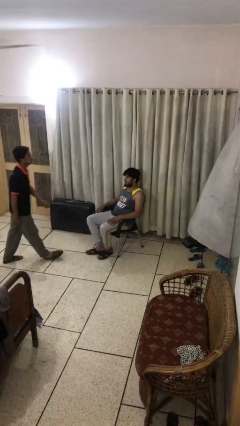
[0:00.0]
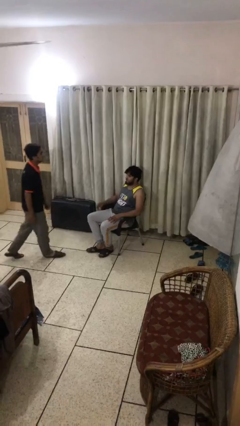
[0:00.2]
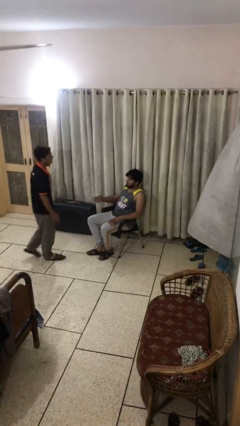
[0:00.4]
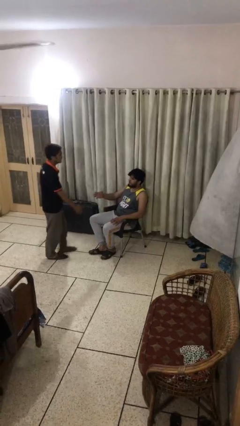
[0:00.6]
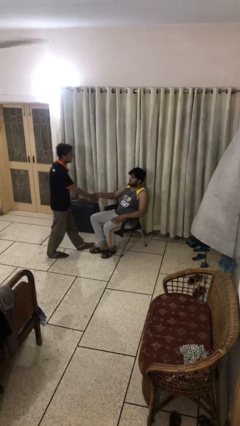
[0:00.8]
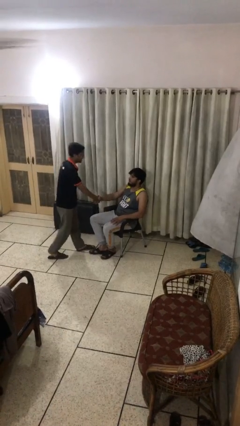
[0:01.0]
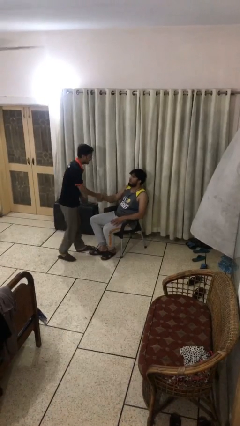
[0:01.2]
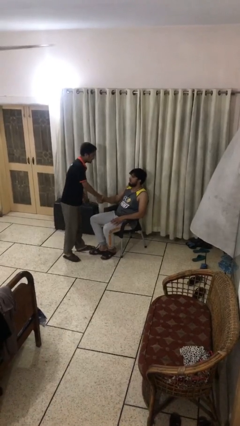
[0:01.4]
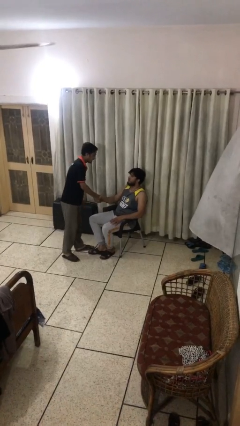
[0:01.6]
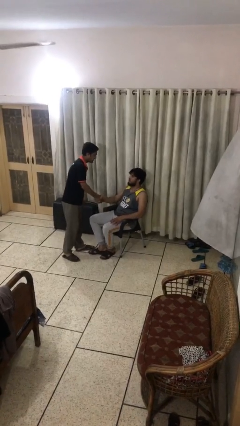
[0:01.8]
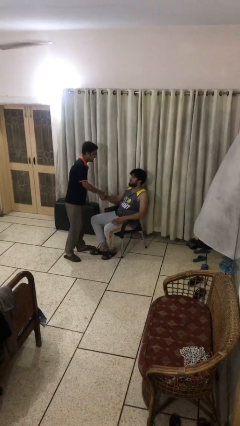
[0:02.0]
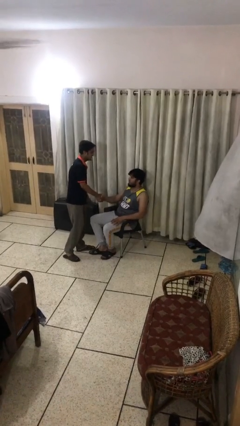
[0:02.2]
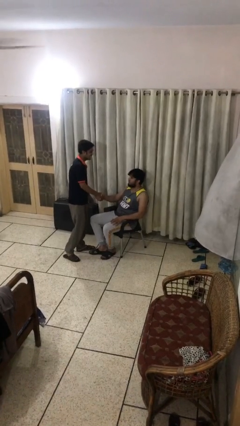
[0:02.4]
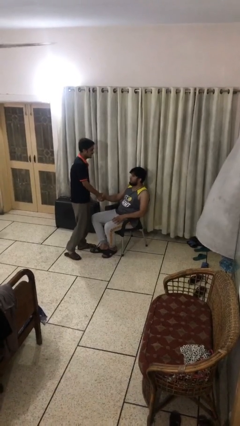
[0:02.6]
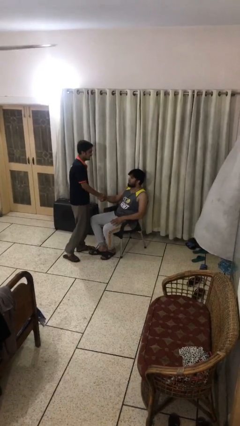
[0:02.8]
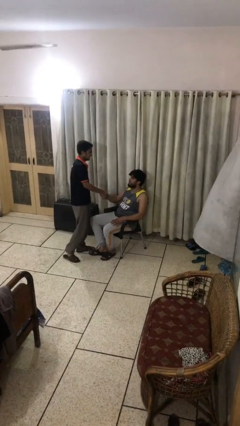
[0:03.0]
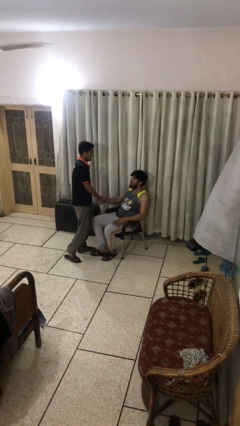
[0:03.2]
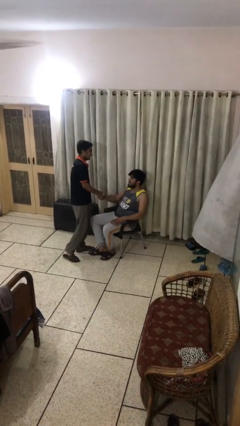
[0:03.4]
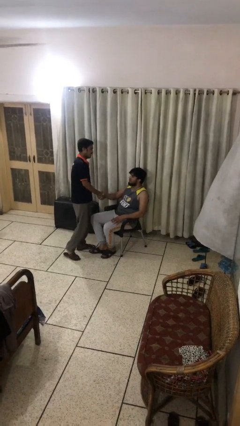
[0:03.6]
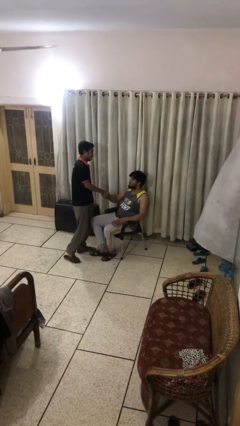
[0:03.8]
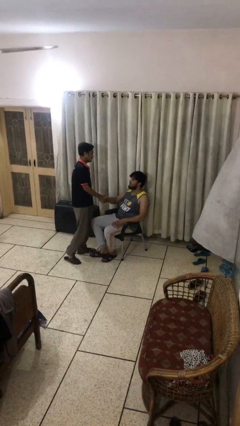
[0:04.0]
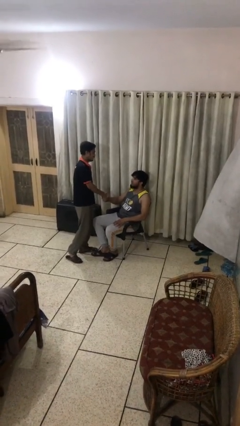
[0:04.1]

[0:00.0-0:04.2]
person shakes hand

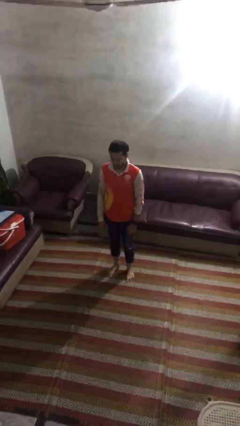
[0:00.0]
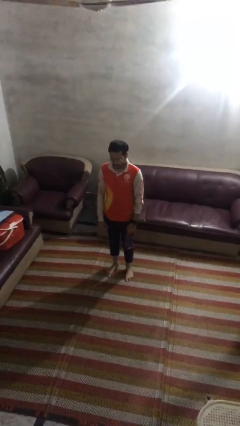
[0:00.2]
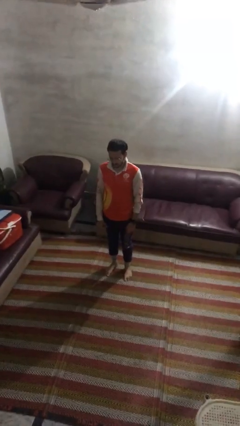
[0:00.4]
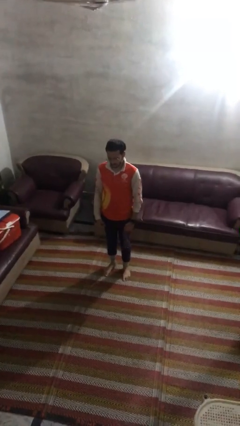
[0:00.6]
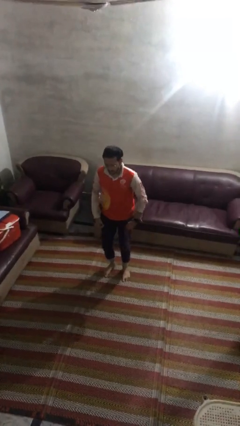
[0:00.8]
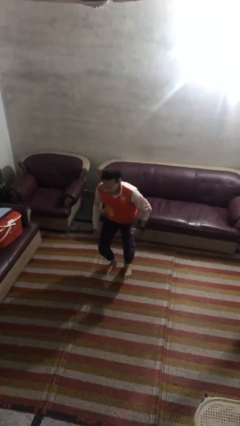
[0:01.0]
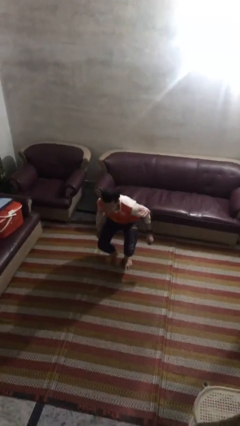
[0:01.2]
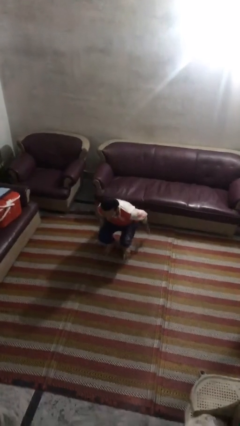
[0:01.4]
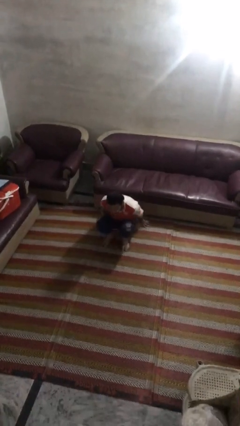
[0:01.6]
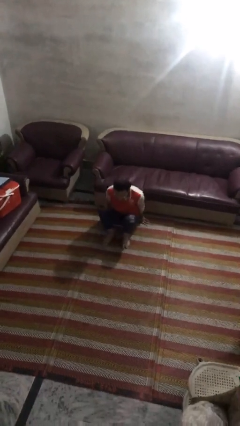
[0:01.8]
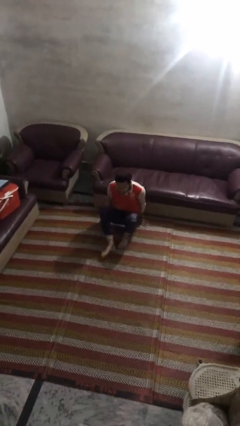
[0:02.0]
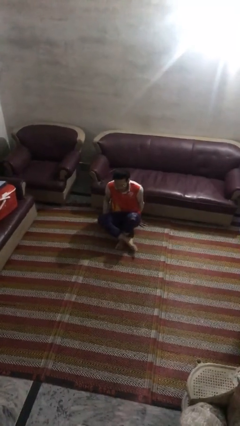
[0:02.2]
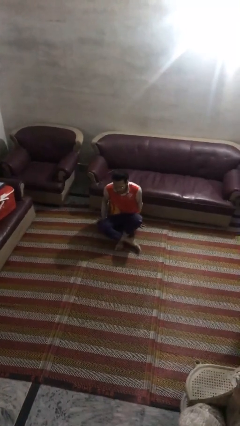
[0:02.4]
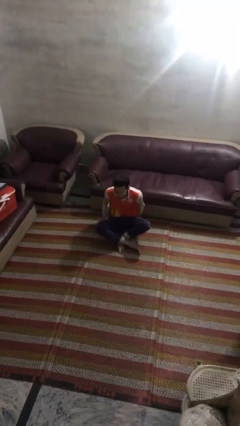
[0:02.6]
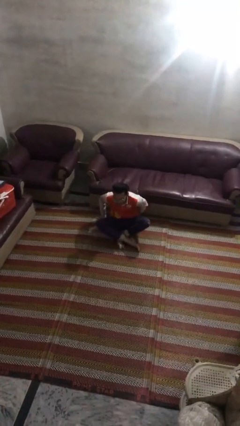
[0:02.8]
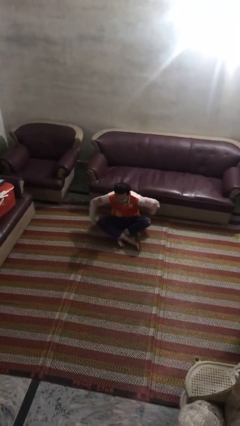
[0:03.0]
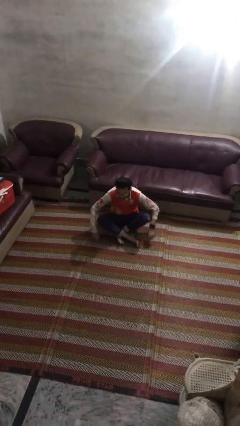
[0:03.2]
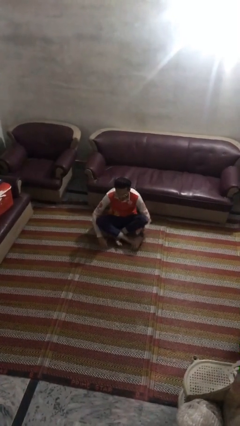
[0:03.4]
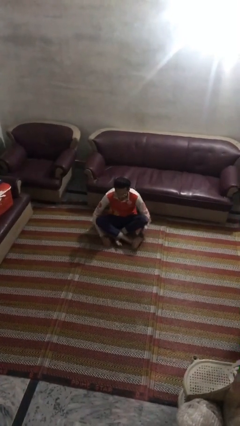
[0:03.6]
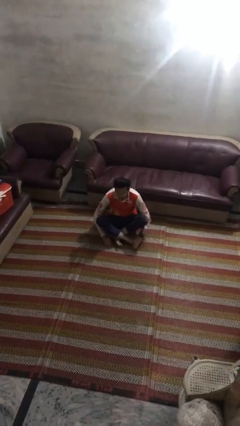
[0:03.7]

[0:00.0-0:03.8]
person sits crisscross

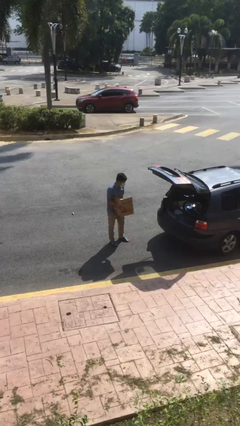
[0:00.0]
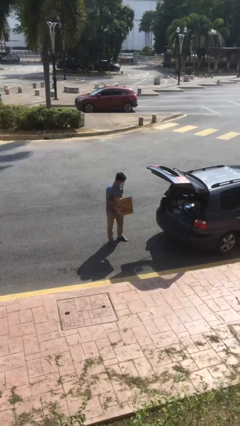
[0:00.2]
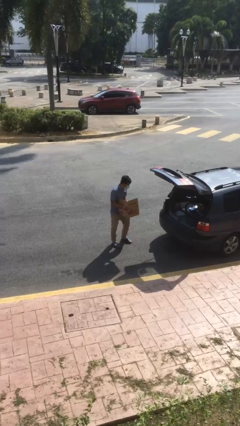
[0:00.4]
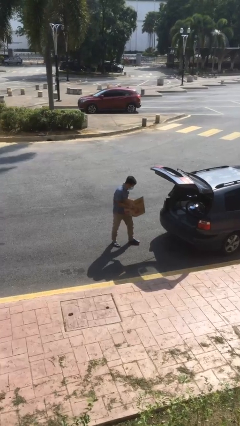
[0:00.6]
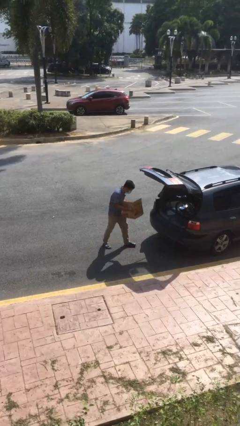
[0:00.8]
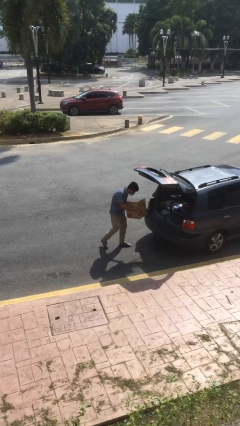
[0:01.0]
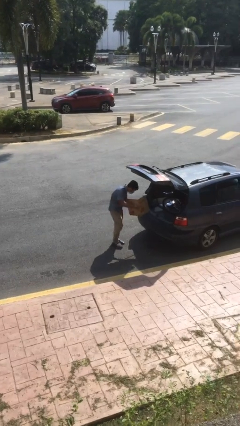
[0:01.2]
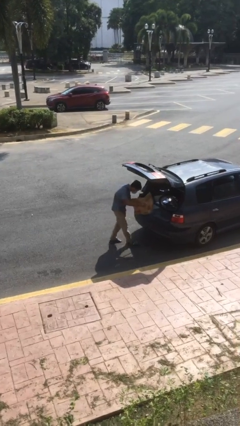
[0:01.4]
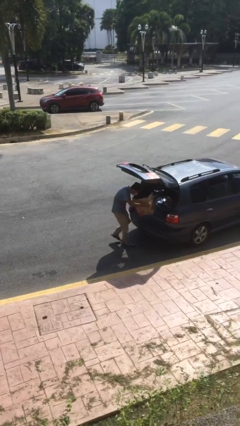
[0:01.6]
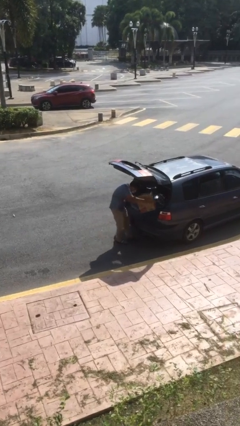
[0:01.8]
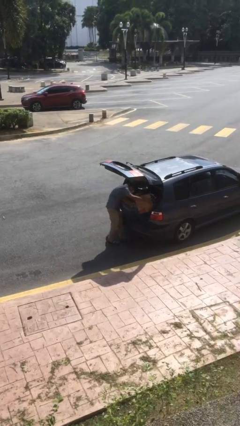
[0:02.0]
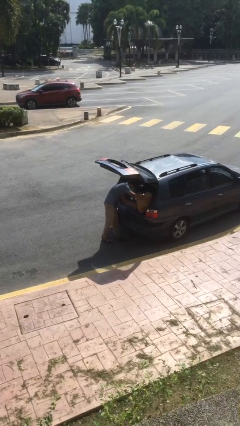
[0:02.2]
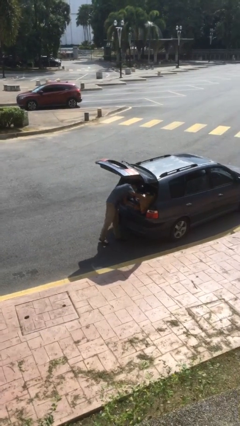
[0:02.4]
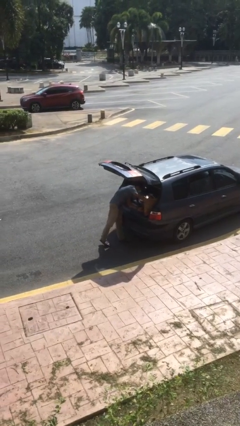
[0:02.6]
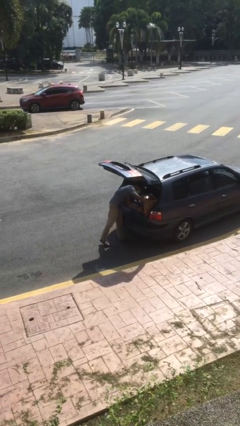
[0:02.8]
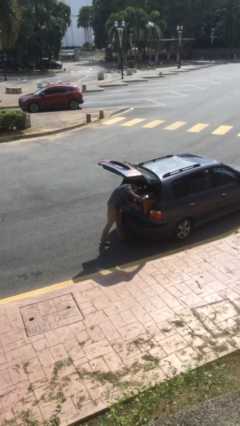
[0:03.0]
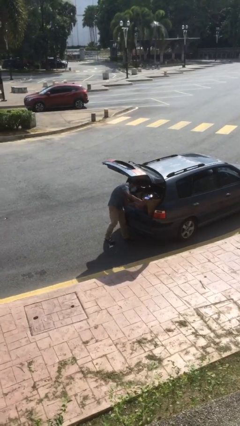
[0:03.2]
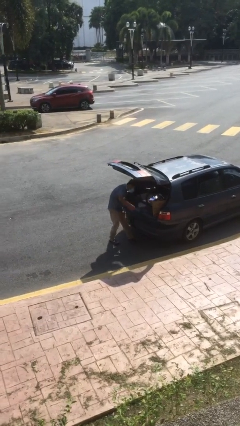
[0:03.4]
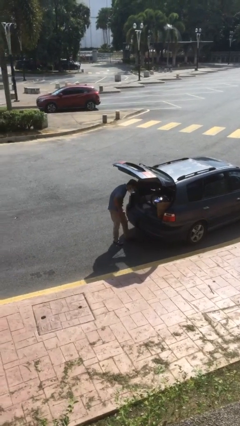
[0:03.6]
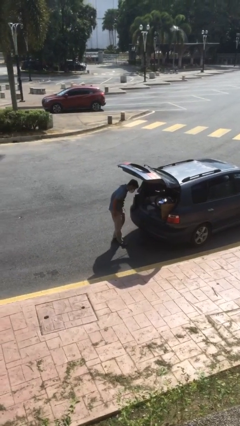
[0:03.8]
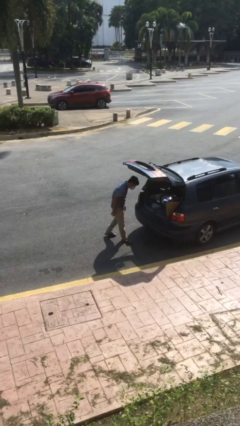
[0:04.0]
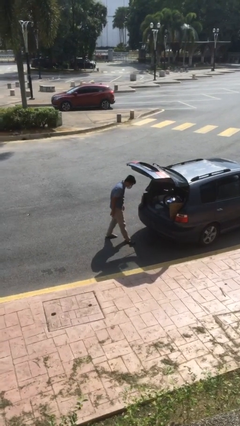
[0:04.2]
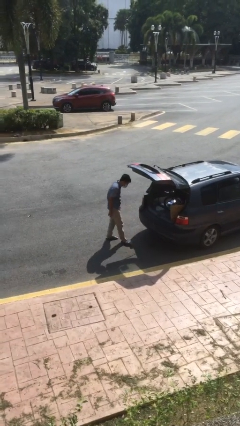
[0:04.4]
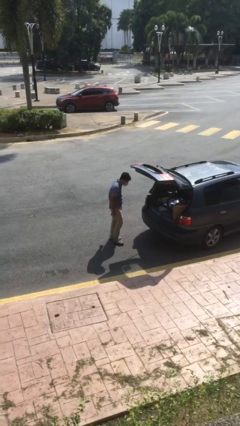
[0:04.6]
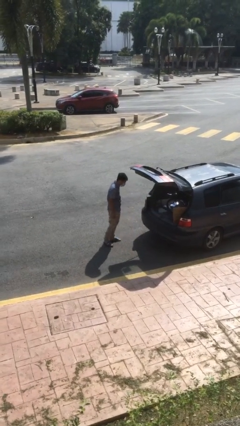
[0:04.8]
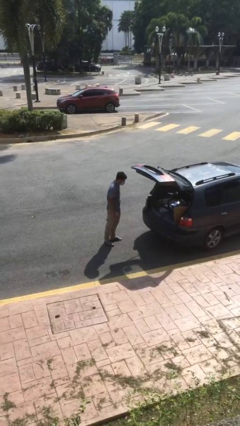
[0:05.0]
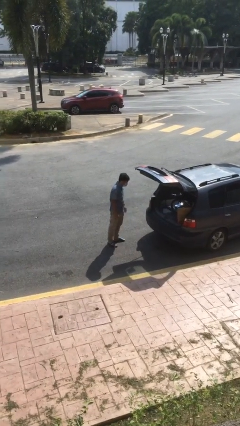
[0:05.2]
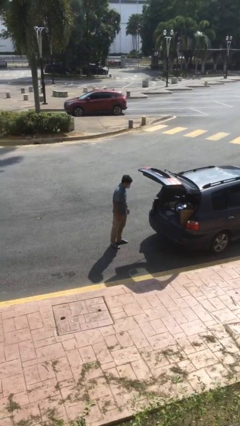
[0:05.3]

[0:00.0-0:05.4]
person loads car

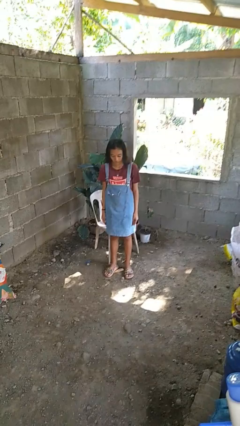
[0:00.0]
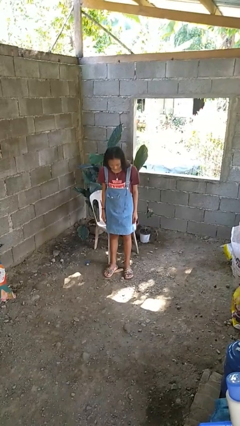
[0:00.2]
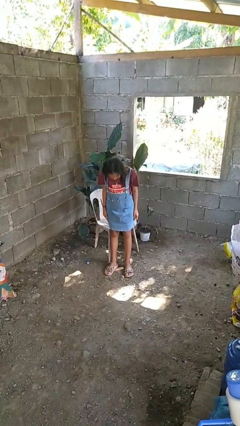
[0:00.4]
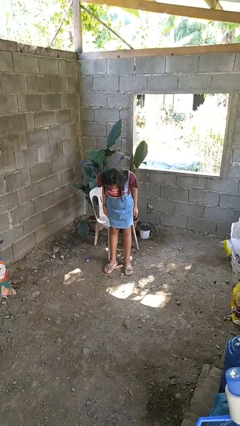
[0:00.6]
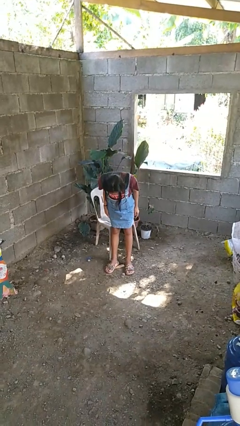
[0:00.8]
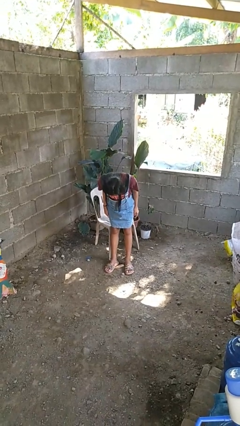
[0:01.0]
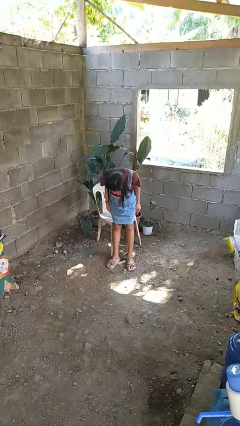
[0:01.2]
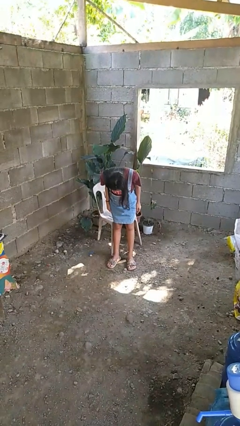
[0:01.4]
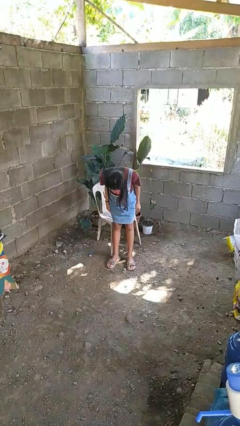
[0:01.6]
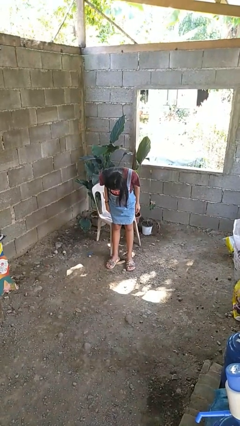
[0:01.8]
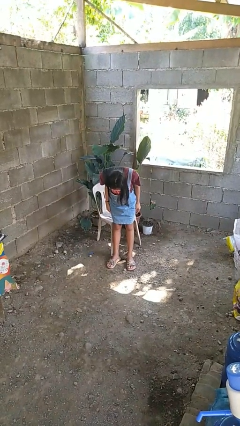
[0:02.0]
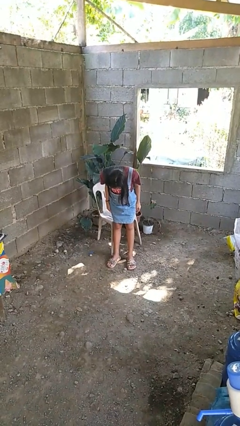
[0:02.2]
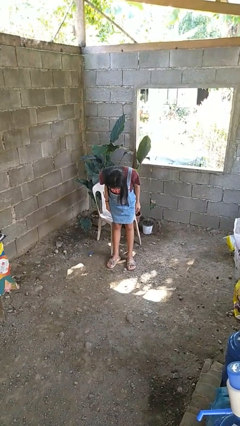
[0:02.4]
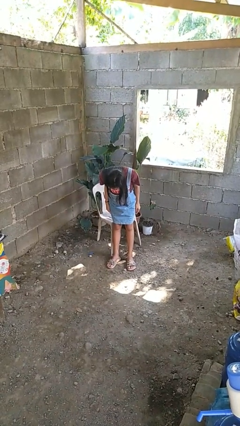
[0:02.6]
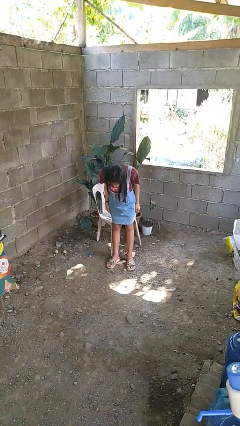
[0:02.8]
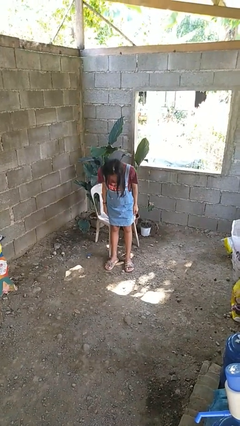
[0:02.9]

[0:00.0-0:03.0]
person bows

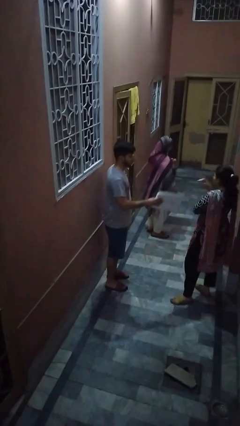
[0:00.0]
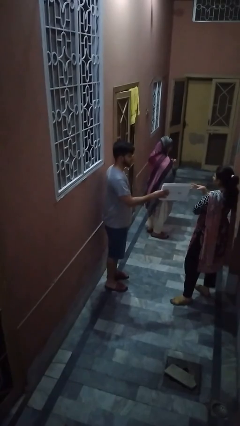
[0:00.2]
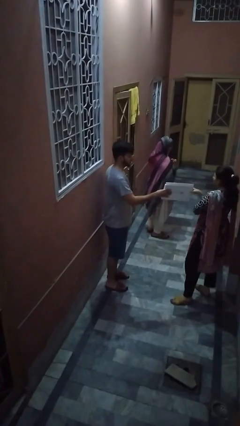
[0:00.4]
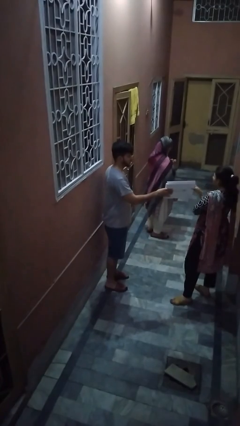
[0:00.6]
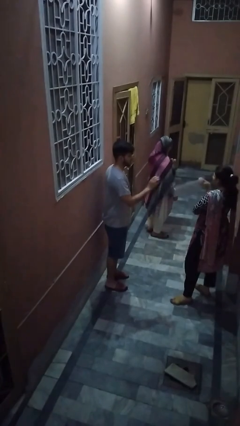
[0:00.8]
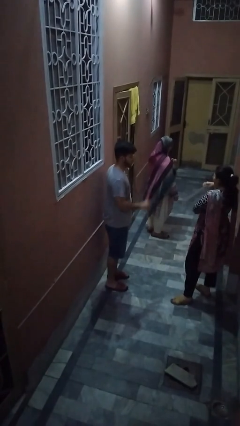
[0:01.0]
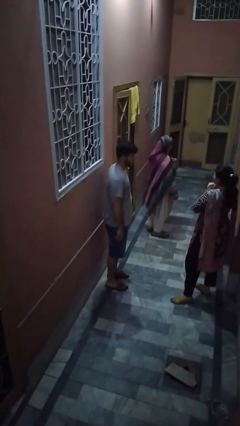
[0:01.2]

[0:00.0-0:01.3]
person transfers object to person
